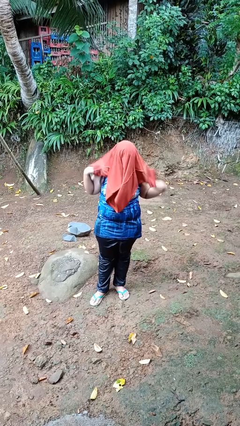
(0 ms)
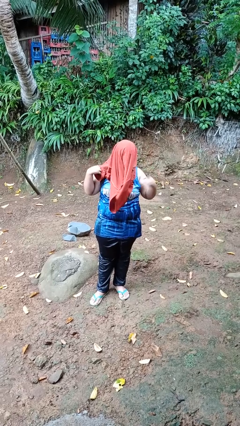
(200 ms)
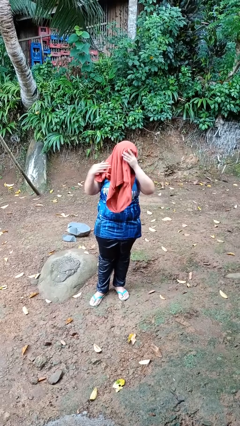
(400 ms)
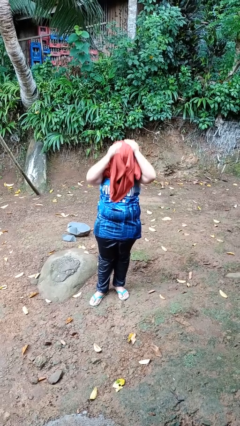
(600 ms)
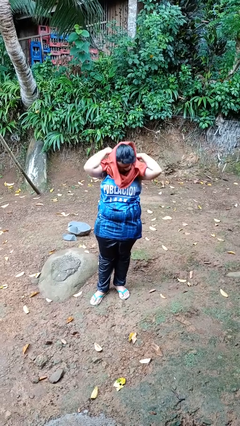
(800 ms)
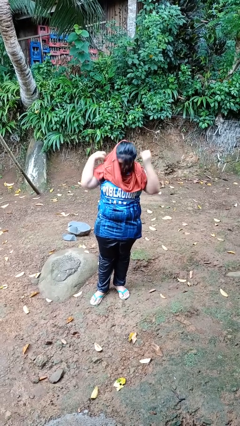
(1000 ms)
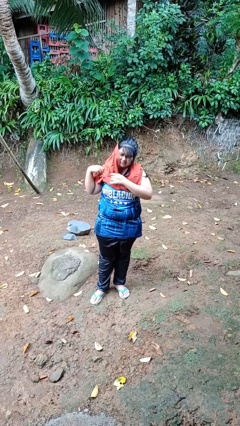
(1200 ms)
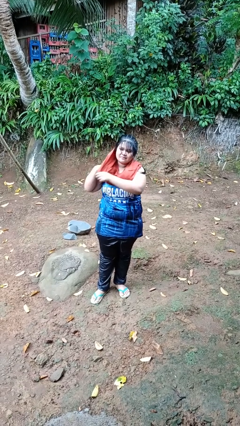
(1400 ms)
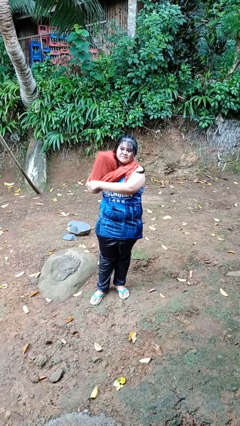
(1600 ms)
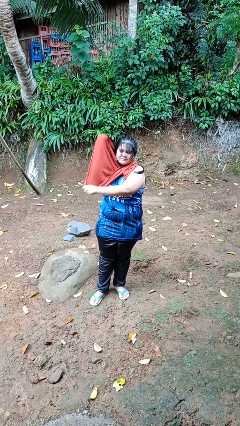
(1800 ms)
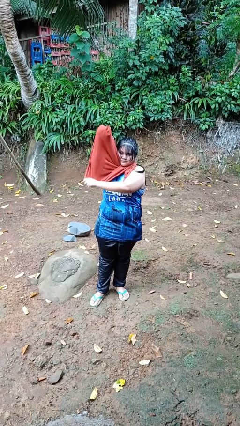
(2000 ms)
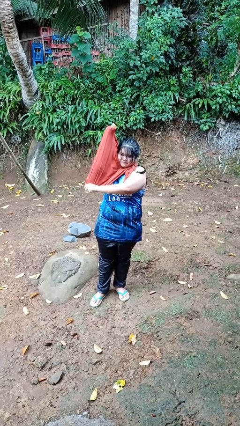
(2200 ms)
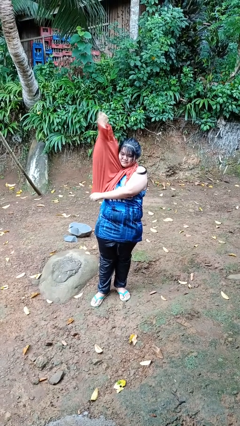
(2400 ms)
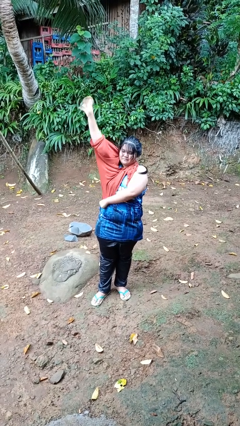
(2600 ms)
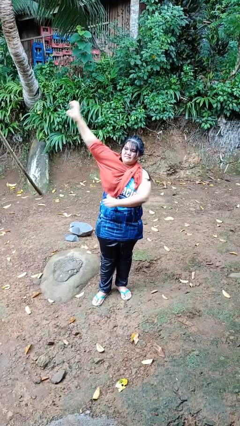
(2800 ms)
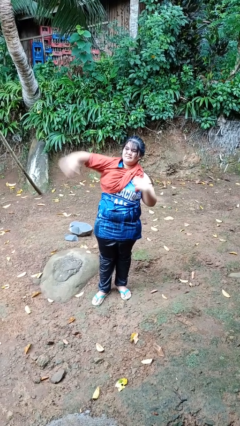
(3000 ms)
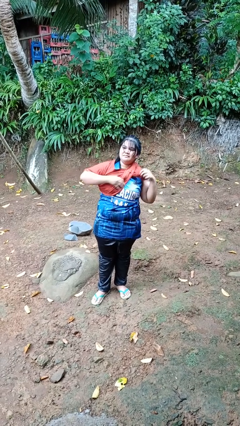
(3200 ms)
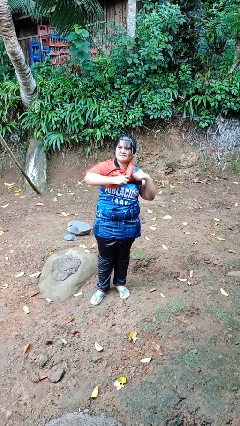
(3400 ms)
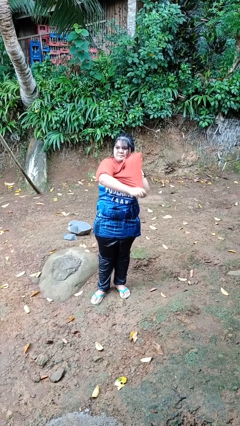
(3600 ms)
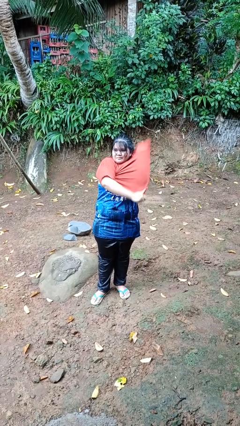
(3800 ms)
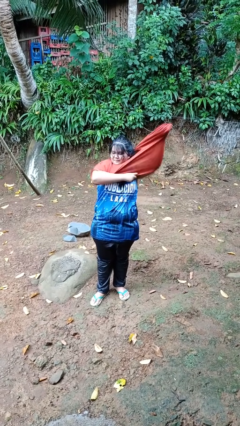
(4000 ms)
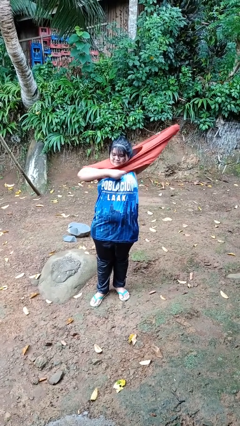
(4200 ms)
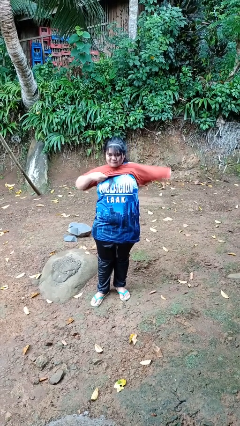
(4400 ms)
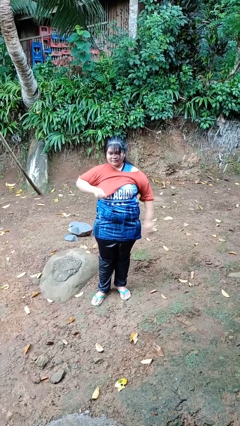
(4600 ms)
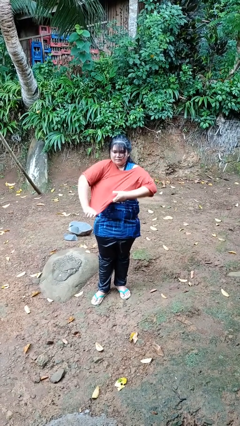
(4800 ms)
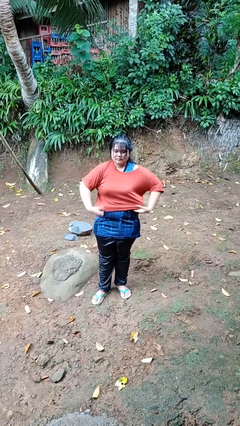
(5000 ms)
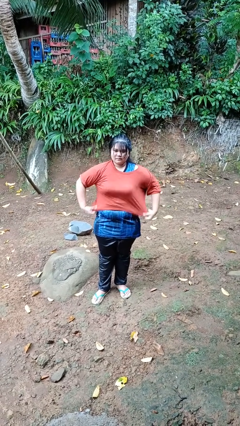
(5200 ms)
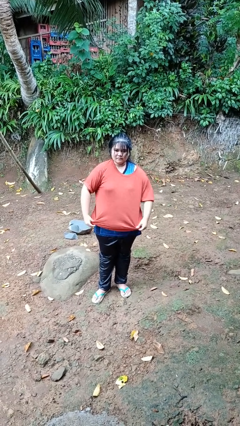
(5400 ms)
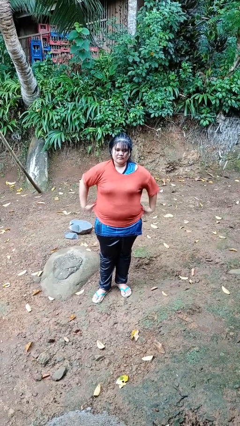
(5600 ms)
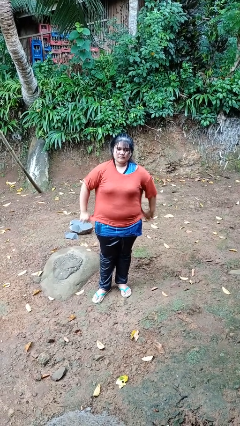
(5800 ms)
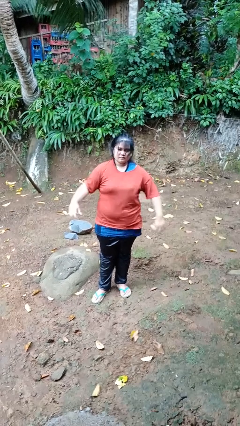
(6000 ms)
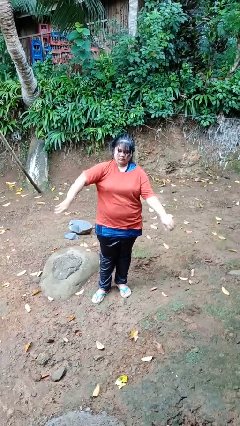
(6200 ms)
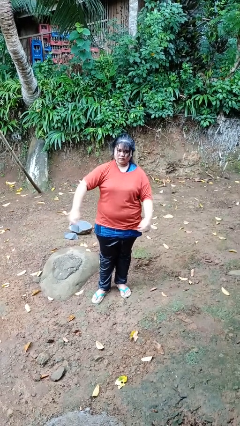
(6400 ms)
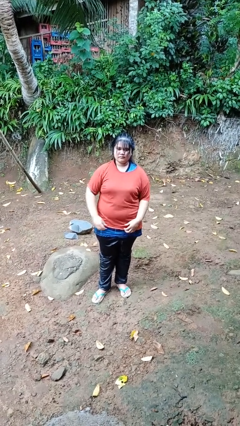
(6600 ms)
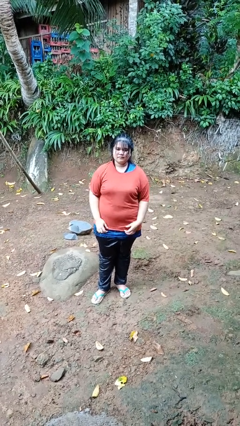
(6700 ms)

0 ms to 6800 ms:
person puts on shirt

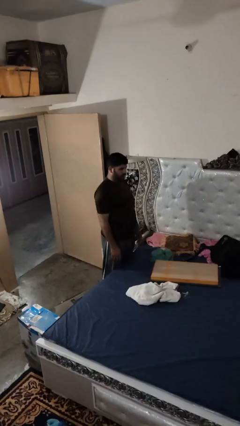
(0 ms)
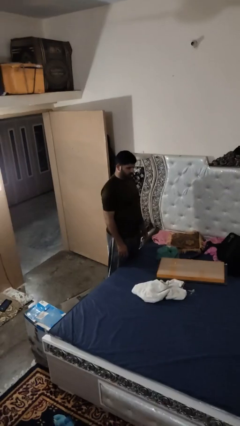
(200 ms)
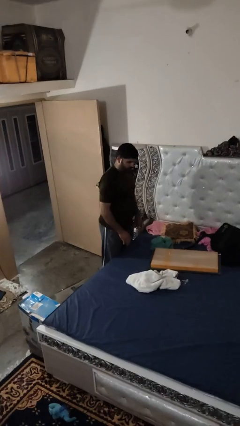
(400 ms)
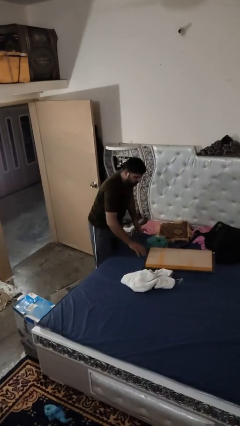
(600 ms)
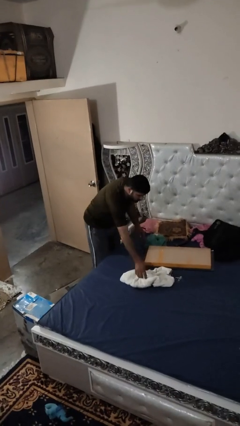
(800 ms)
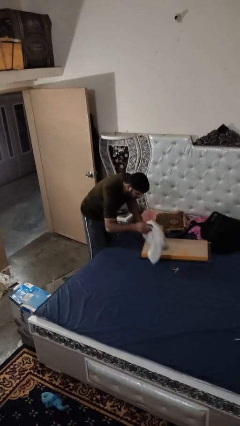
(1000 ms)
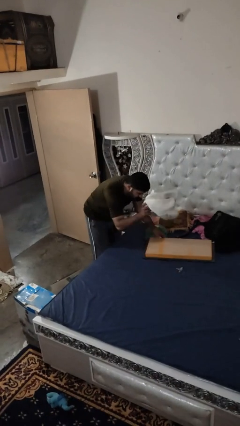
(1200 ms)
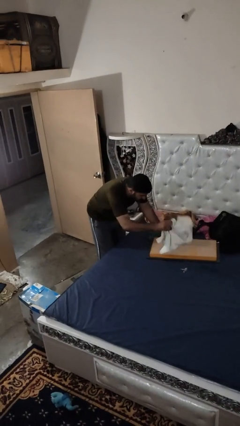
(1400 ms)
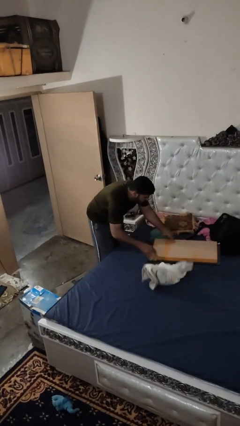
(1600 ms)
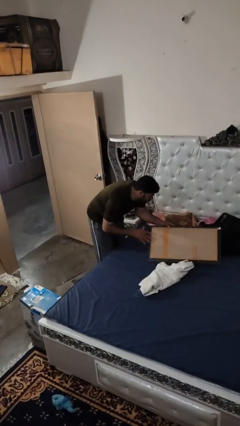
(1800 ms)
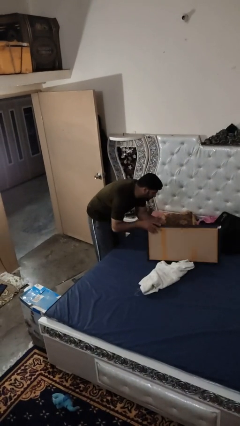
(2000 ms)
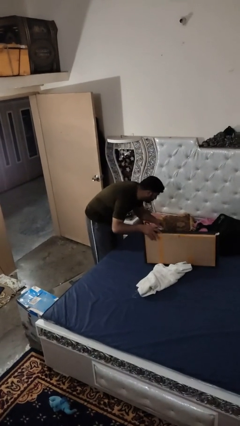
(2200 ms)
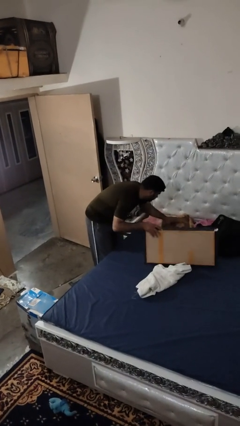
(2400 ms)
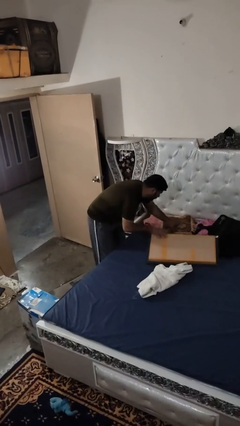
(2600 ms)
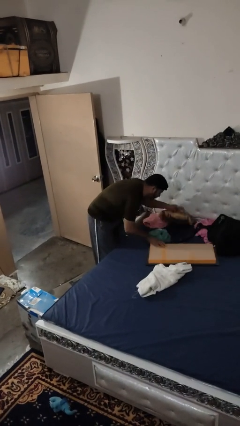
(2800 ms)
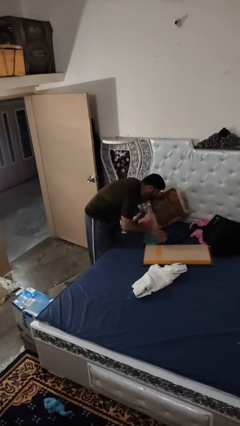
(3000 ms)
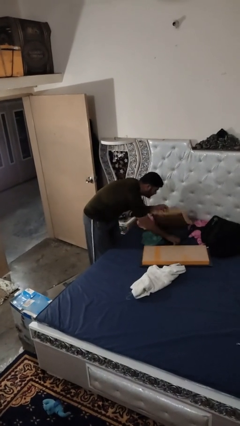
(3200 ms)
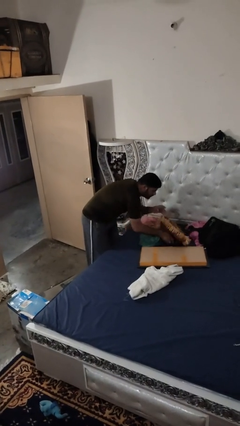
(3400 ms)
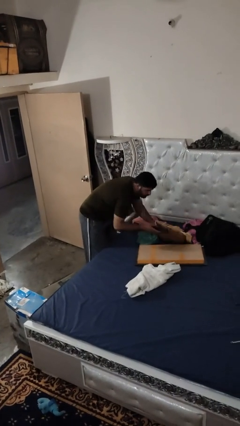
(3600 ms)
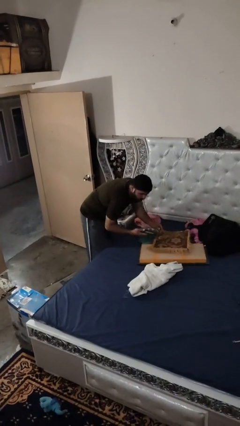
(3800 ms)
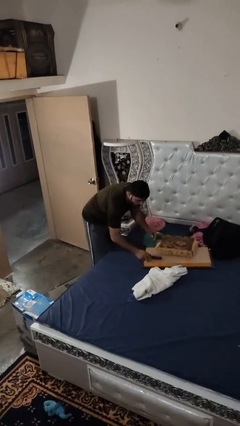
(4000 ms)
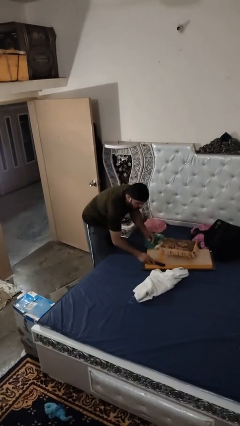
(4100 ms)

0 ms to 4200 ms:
person searches under bed

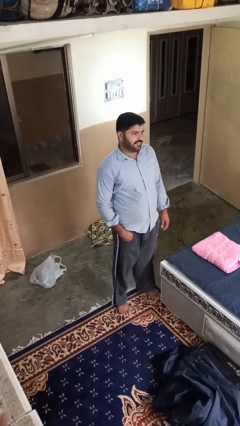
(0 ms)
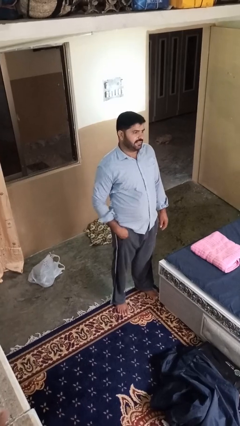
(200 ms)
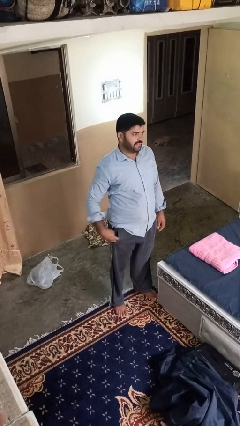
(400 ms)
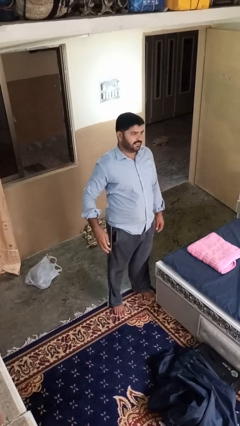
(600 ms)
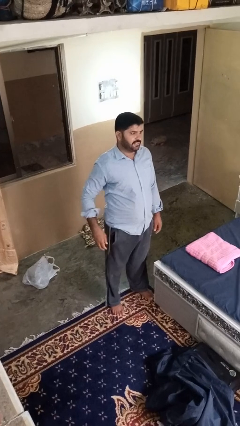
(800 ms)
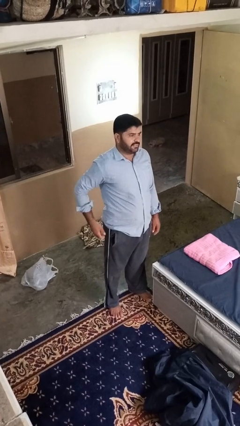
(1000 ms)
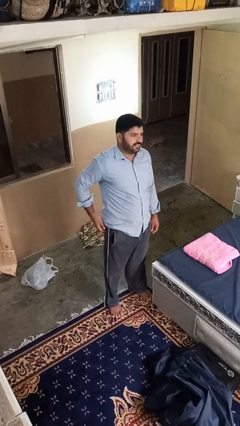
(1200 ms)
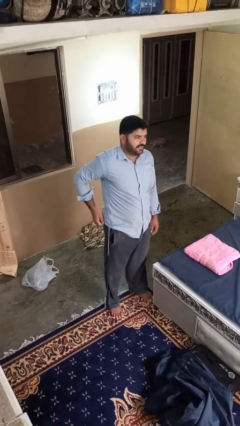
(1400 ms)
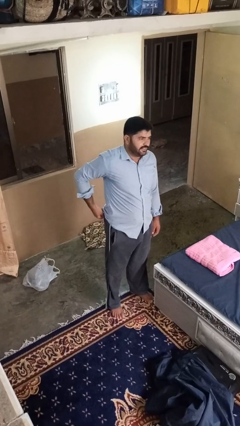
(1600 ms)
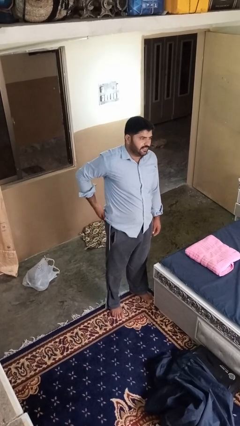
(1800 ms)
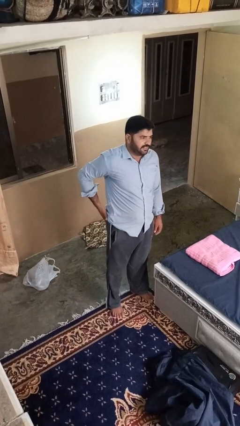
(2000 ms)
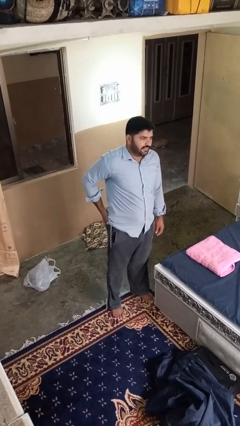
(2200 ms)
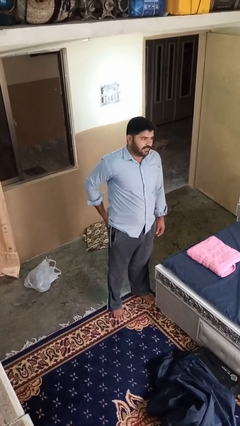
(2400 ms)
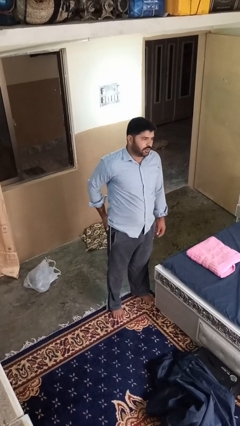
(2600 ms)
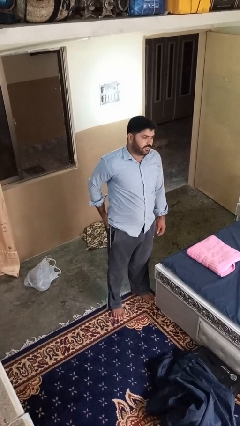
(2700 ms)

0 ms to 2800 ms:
person puts hands in back pockets

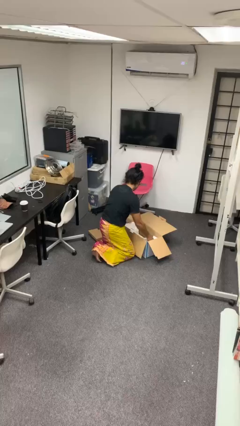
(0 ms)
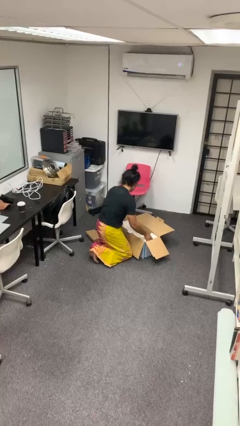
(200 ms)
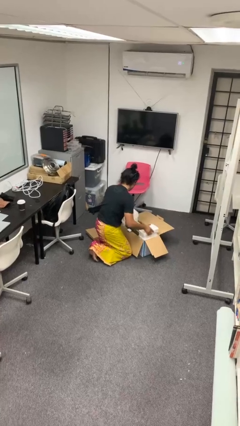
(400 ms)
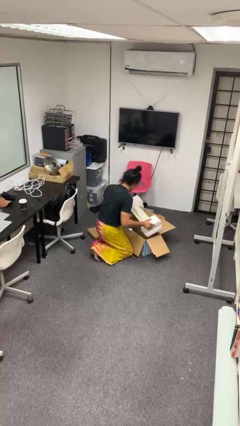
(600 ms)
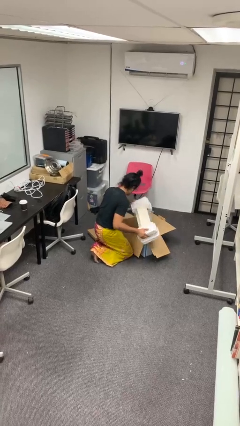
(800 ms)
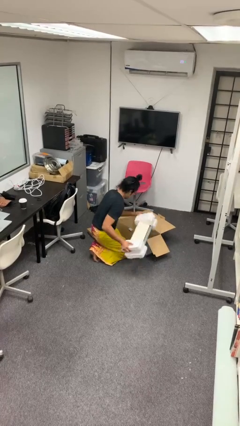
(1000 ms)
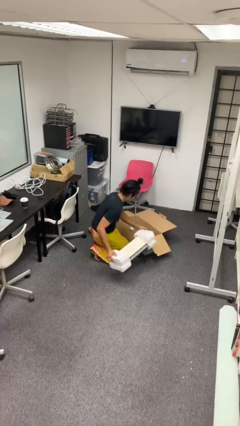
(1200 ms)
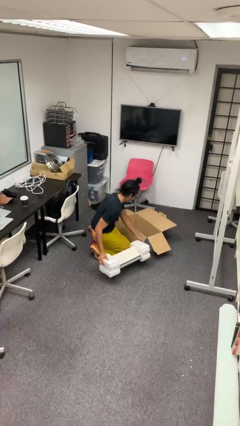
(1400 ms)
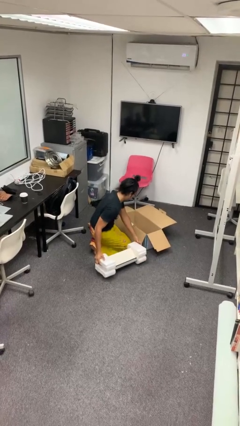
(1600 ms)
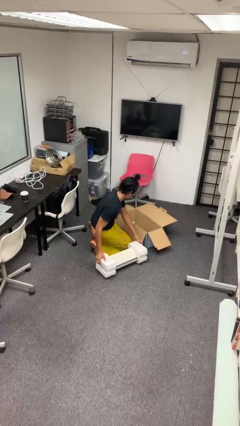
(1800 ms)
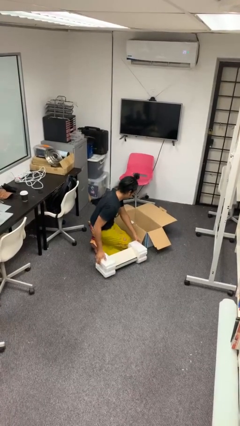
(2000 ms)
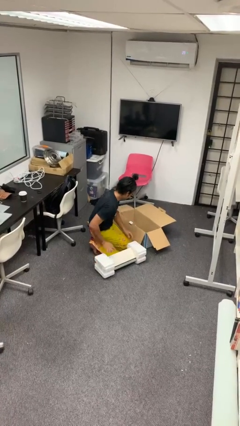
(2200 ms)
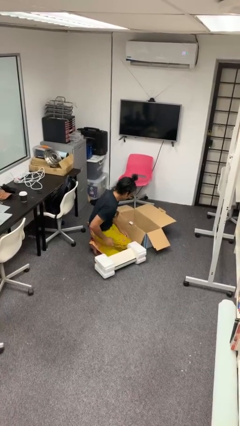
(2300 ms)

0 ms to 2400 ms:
person takes object from box

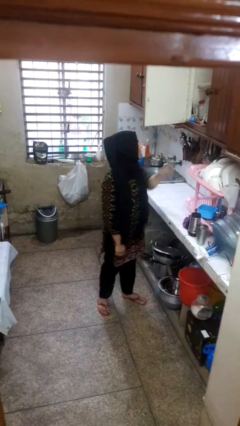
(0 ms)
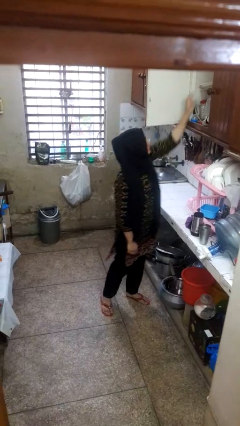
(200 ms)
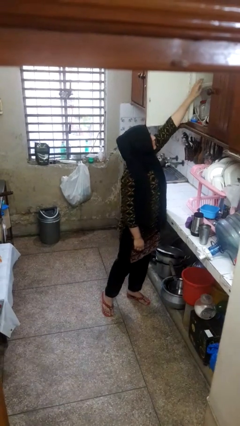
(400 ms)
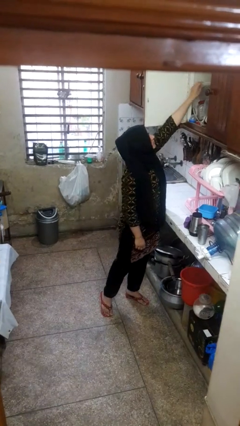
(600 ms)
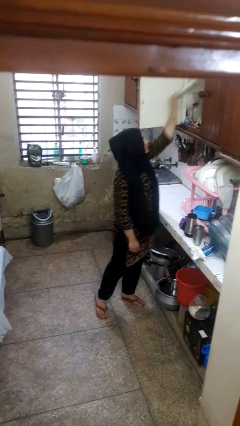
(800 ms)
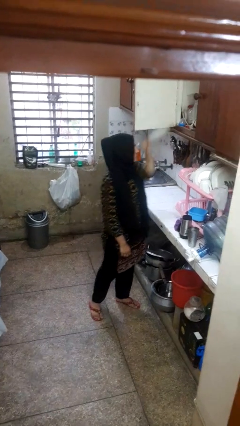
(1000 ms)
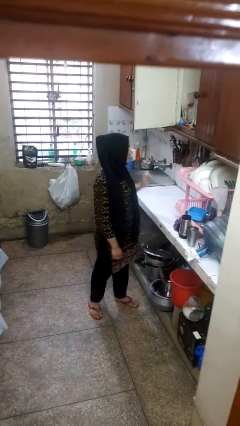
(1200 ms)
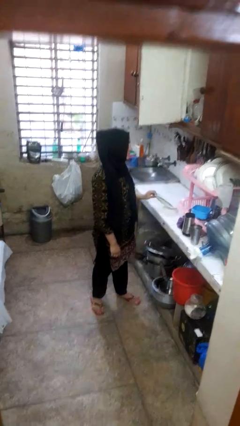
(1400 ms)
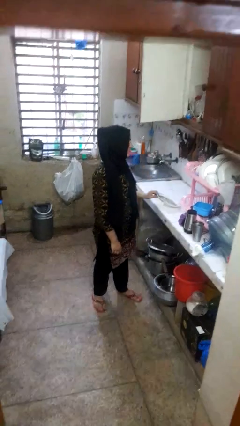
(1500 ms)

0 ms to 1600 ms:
person takes object from cabinet

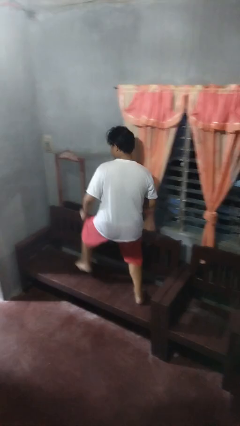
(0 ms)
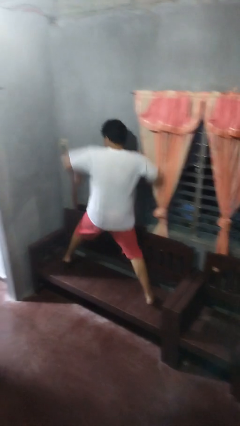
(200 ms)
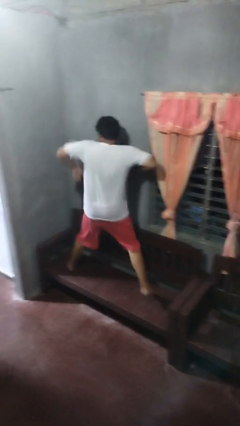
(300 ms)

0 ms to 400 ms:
person jumps on couch
